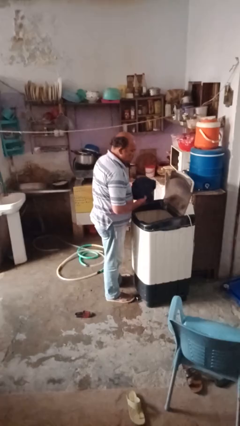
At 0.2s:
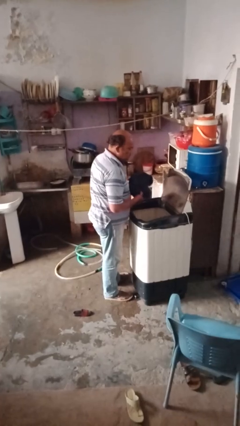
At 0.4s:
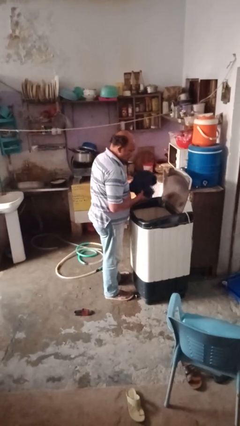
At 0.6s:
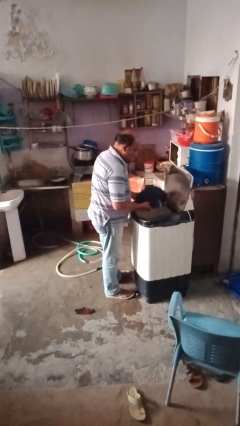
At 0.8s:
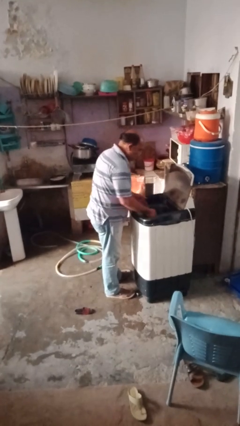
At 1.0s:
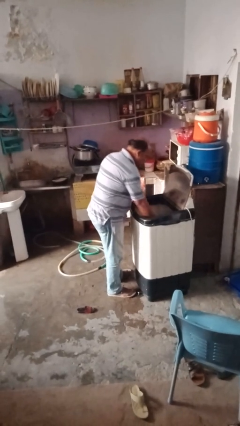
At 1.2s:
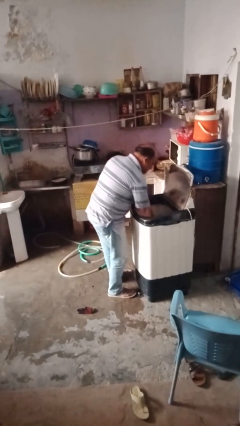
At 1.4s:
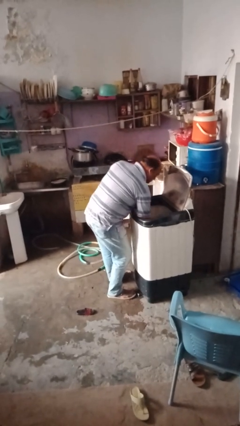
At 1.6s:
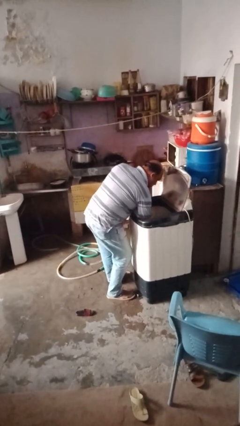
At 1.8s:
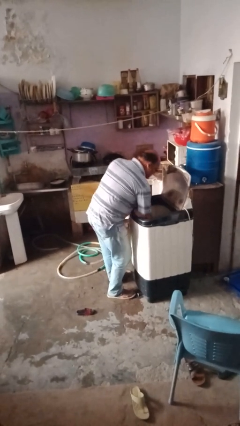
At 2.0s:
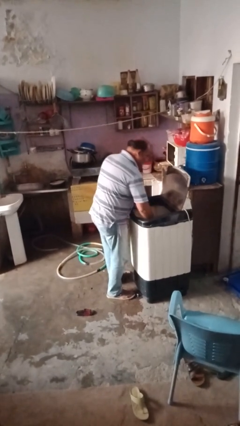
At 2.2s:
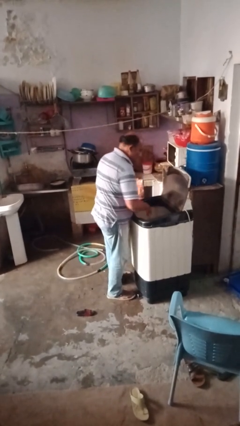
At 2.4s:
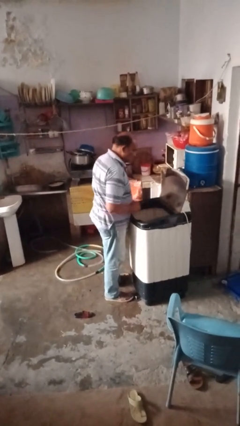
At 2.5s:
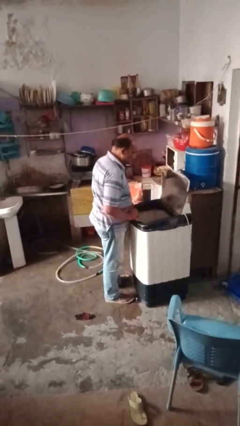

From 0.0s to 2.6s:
person loads clotheswasher

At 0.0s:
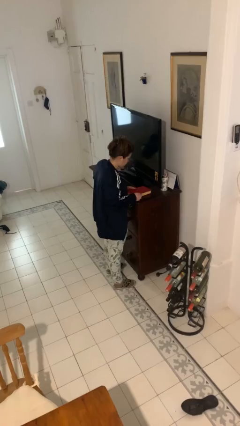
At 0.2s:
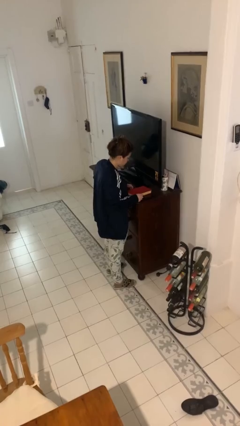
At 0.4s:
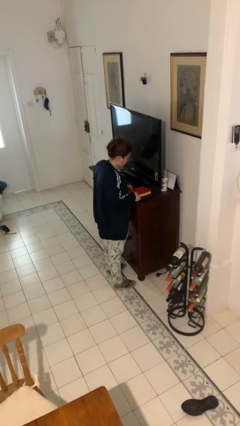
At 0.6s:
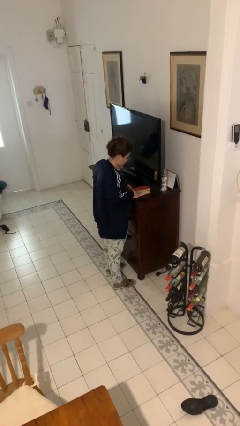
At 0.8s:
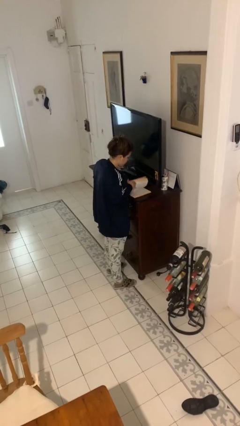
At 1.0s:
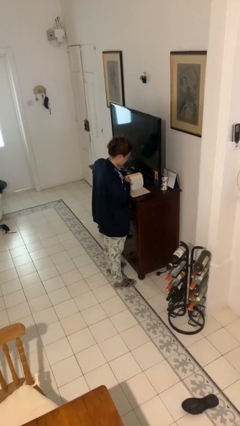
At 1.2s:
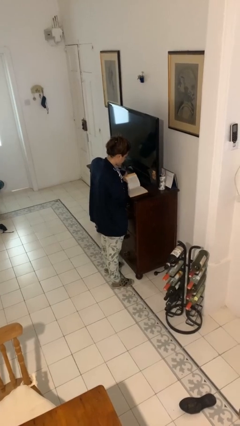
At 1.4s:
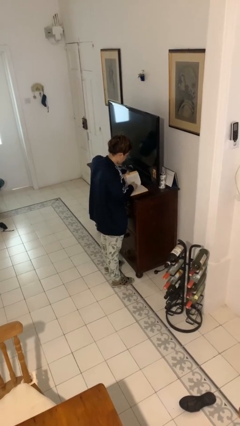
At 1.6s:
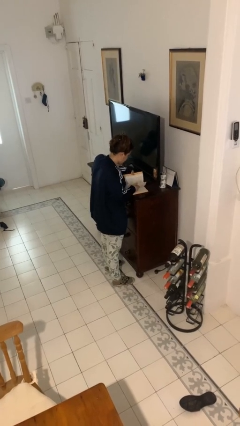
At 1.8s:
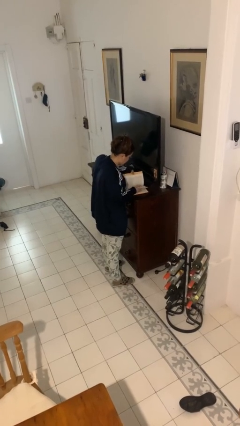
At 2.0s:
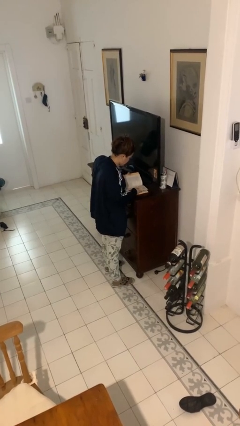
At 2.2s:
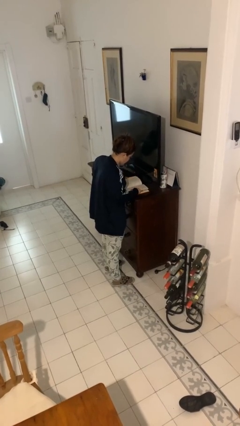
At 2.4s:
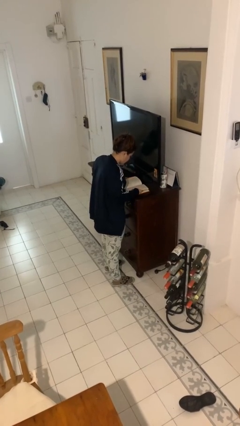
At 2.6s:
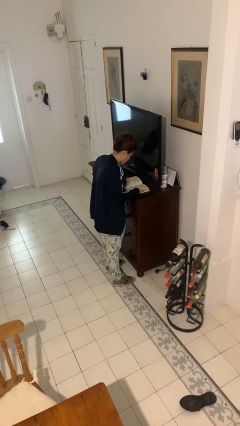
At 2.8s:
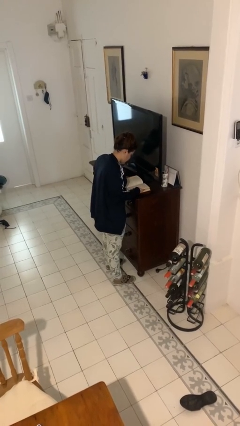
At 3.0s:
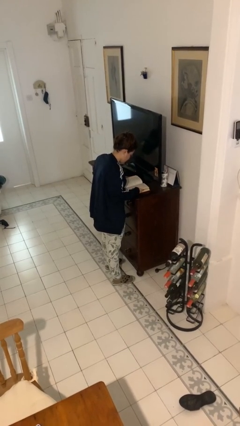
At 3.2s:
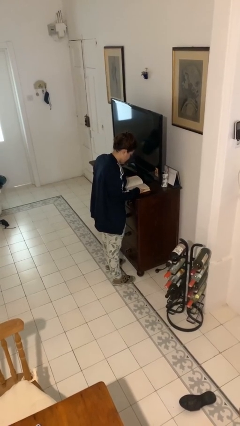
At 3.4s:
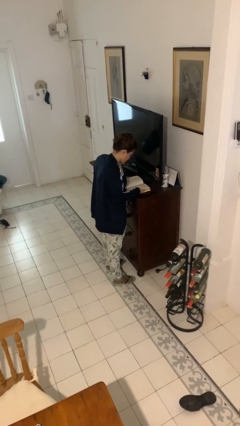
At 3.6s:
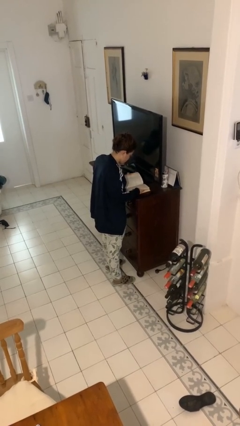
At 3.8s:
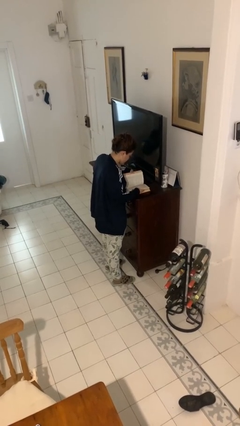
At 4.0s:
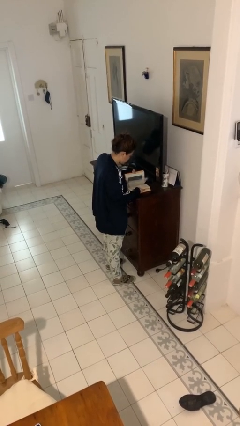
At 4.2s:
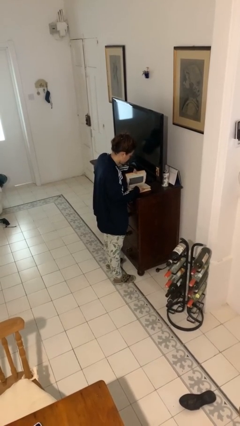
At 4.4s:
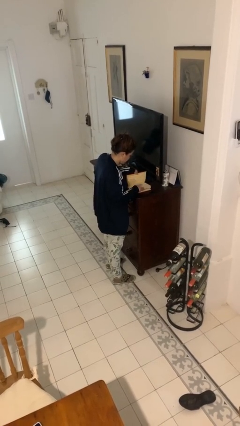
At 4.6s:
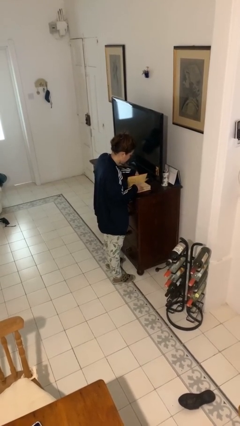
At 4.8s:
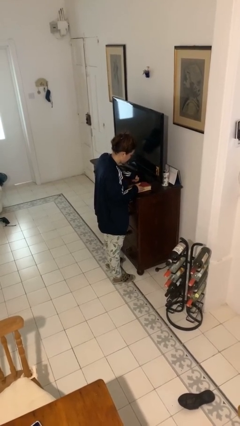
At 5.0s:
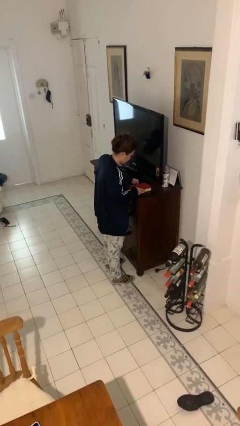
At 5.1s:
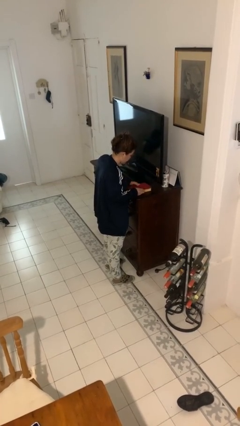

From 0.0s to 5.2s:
person reads book

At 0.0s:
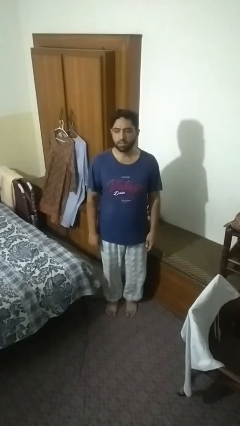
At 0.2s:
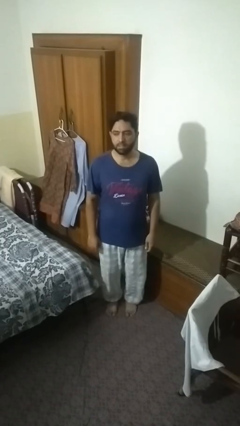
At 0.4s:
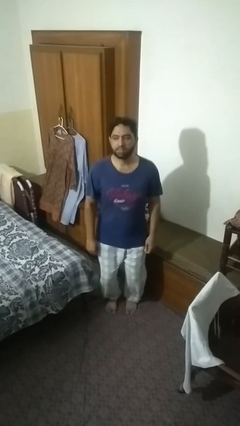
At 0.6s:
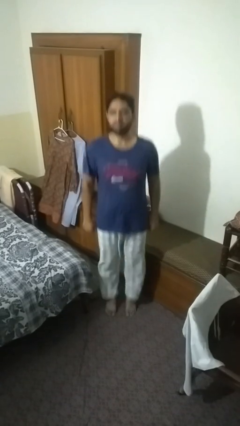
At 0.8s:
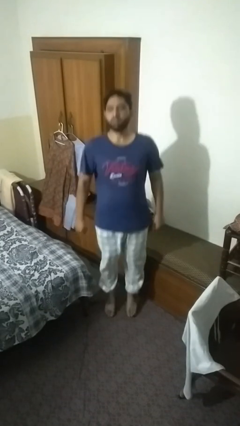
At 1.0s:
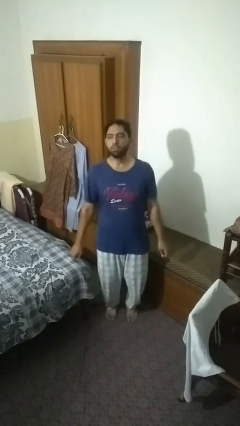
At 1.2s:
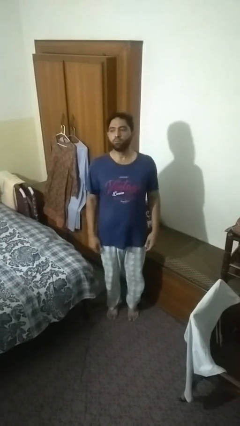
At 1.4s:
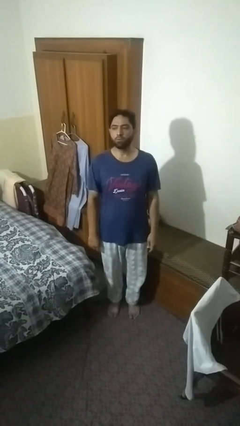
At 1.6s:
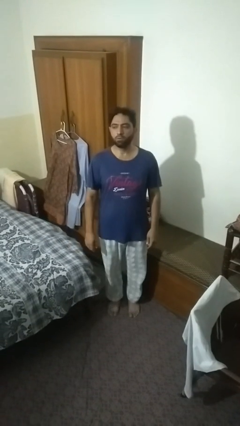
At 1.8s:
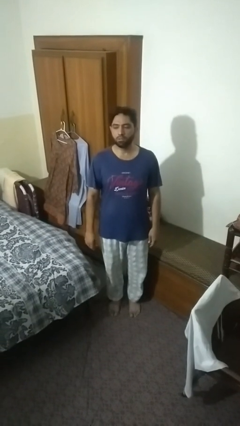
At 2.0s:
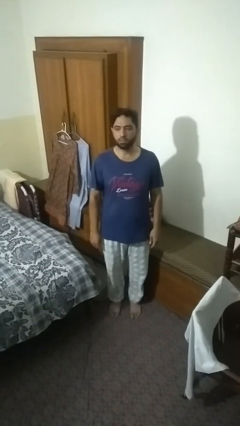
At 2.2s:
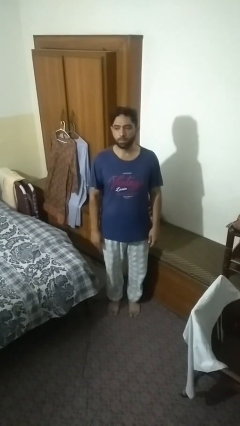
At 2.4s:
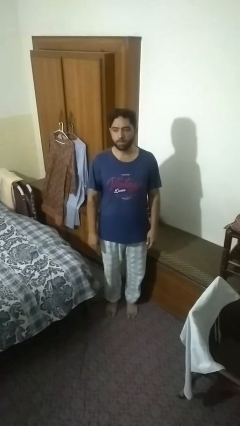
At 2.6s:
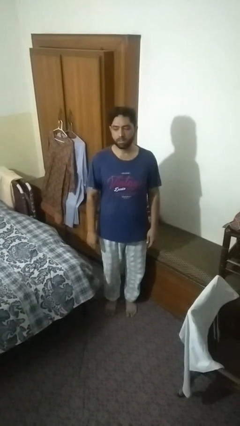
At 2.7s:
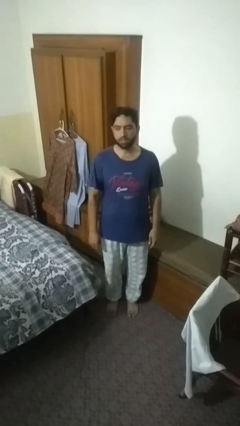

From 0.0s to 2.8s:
person jumps

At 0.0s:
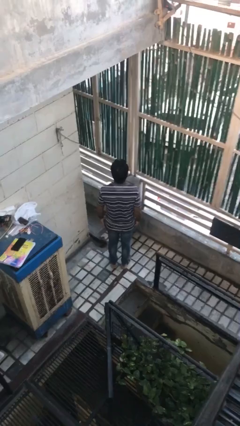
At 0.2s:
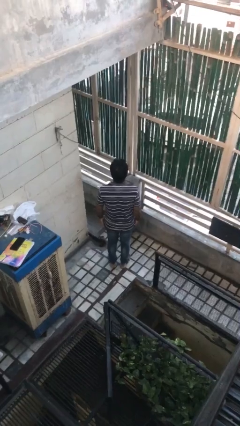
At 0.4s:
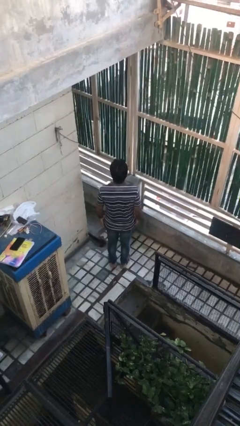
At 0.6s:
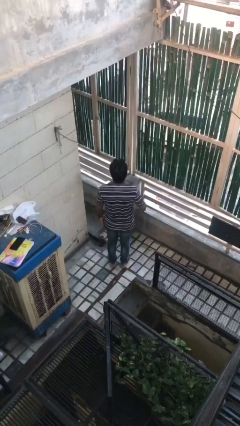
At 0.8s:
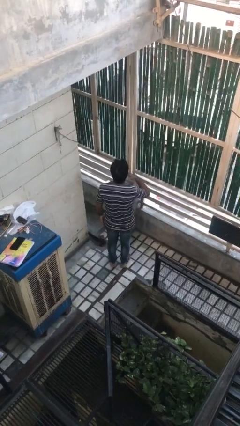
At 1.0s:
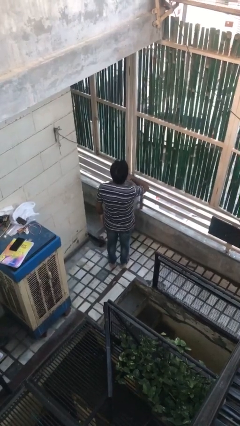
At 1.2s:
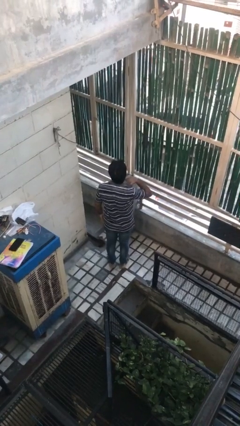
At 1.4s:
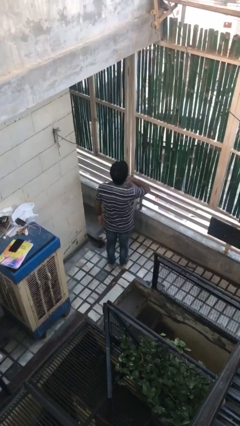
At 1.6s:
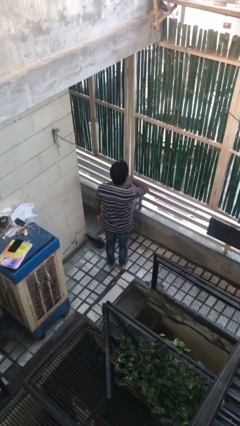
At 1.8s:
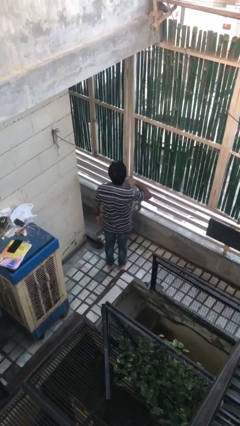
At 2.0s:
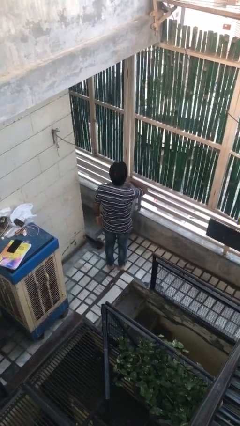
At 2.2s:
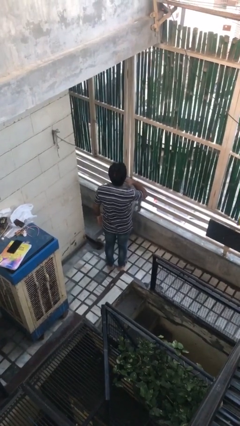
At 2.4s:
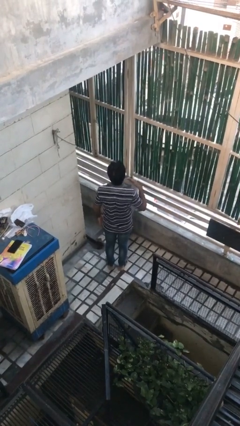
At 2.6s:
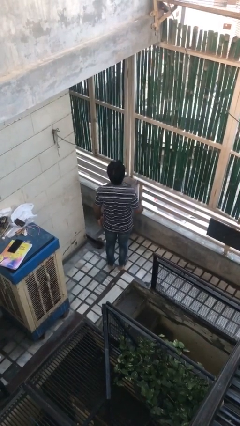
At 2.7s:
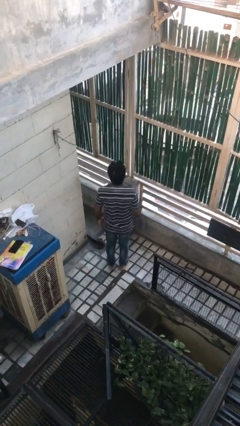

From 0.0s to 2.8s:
person gestures cut

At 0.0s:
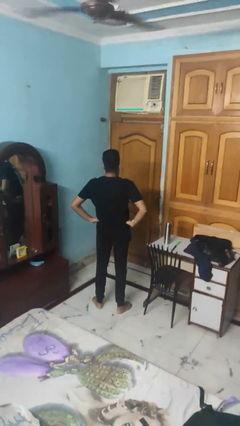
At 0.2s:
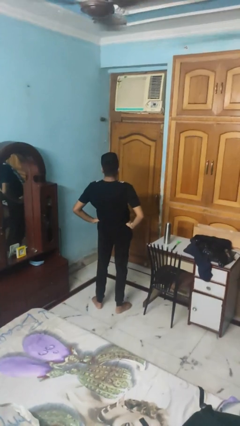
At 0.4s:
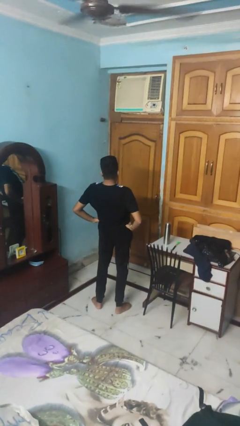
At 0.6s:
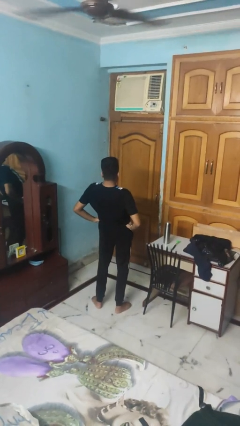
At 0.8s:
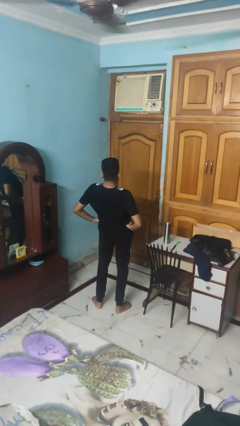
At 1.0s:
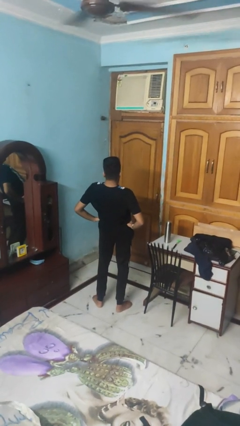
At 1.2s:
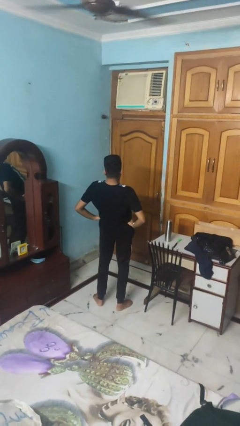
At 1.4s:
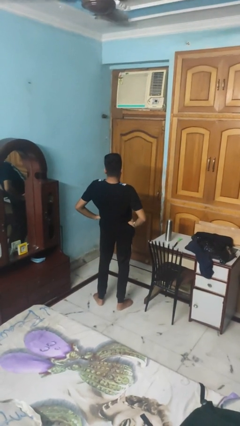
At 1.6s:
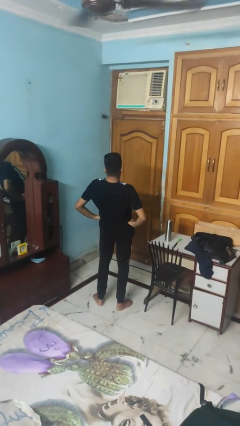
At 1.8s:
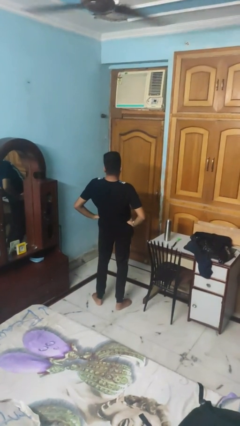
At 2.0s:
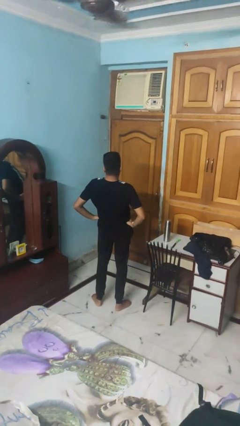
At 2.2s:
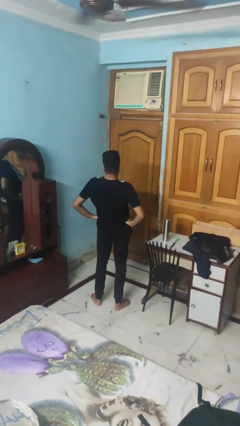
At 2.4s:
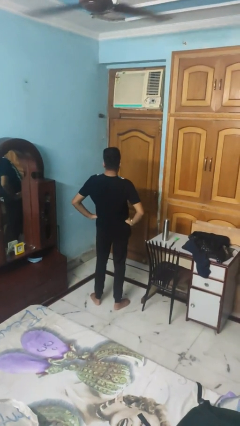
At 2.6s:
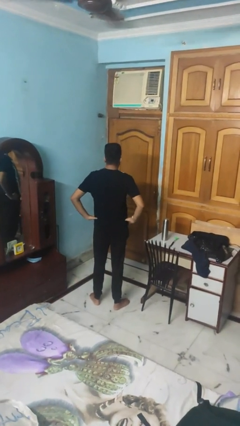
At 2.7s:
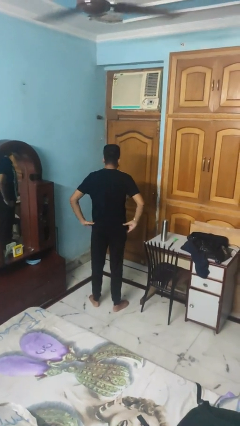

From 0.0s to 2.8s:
person stretches back

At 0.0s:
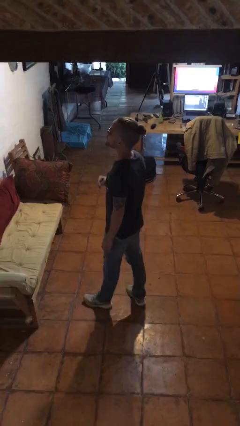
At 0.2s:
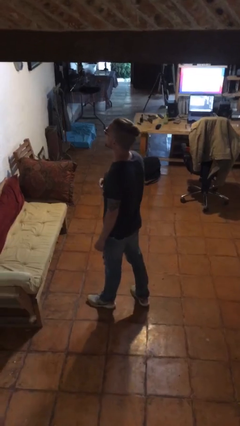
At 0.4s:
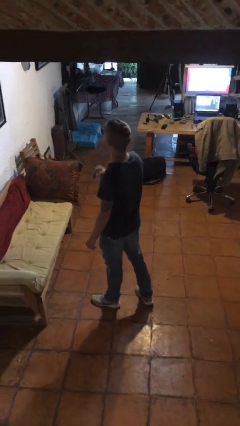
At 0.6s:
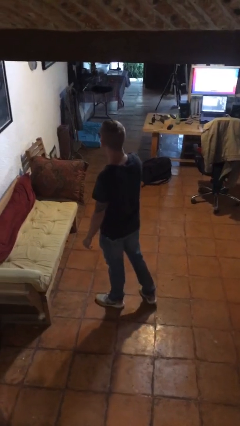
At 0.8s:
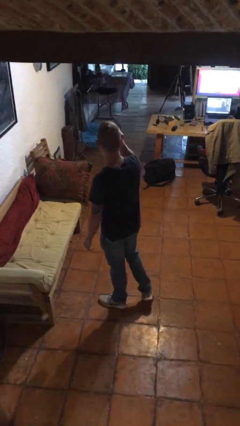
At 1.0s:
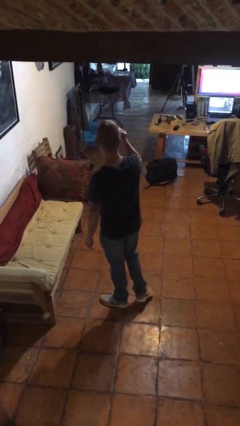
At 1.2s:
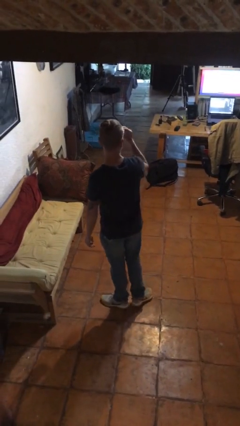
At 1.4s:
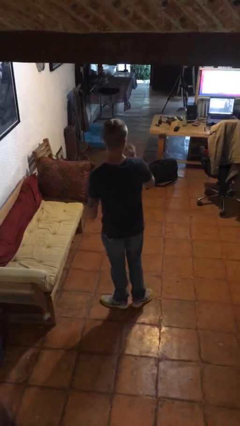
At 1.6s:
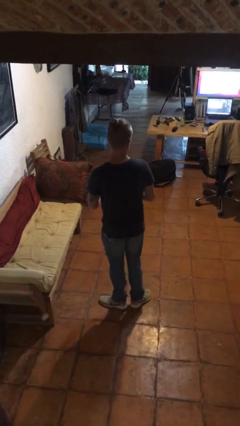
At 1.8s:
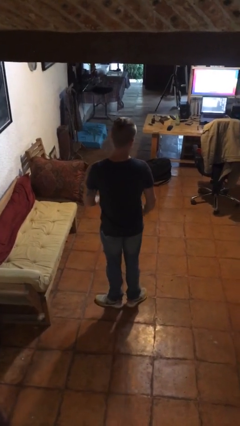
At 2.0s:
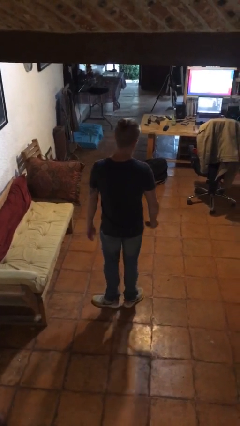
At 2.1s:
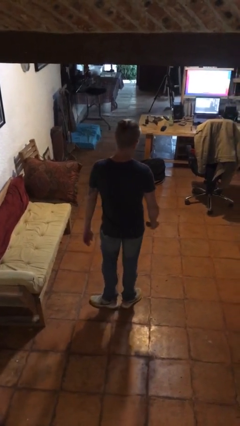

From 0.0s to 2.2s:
person takes off sunglasses
